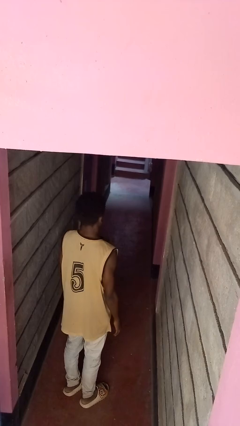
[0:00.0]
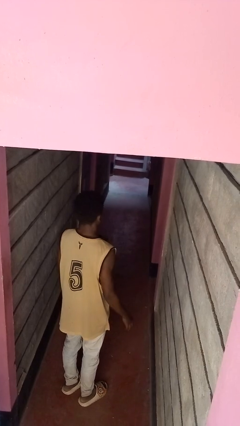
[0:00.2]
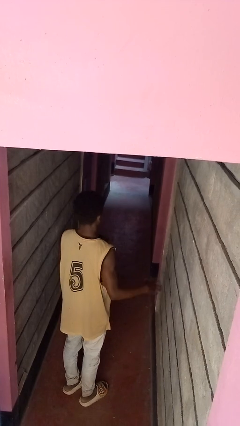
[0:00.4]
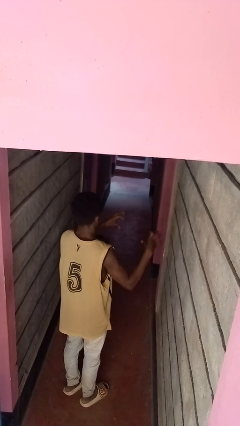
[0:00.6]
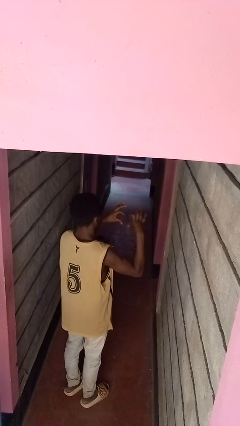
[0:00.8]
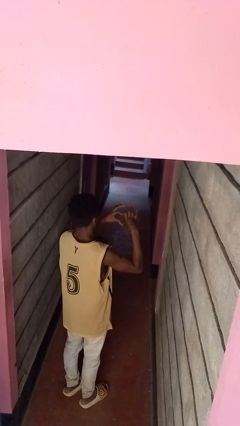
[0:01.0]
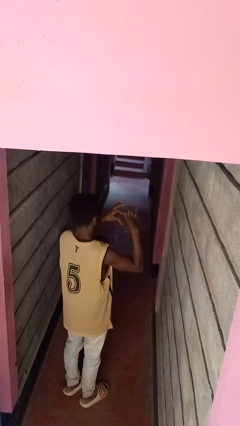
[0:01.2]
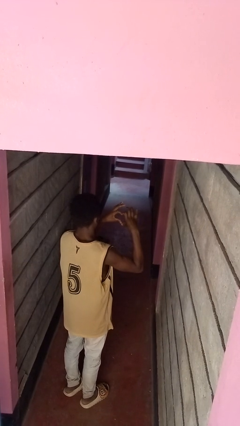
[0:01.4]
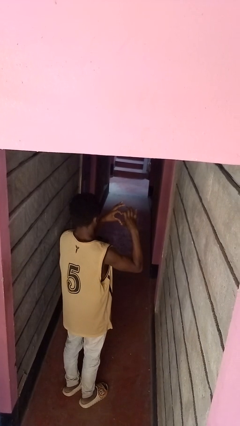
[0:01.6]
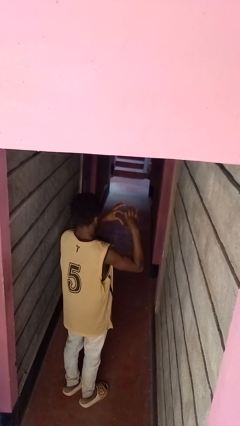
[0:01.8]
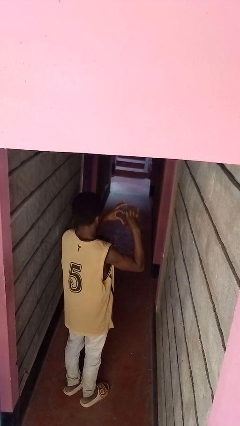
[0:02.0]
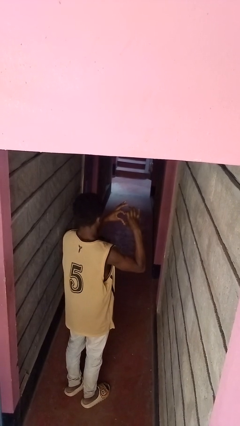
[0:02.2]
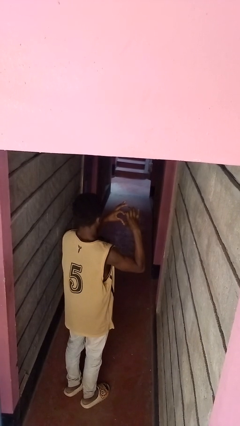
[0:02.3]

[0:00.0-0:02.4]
person gestures heart

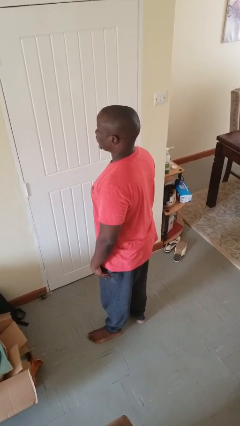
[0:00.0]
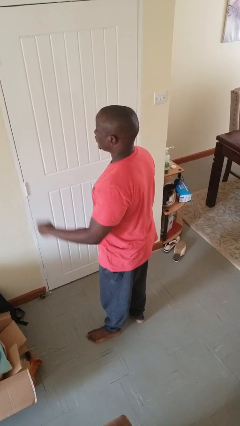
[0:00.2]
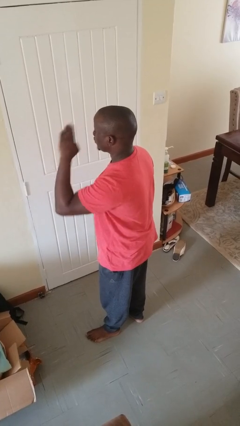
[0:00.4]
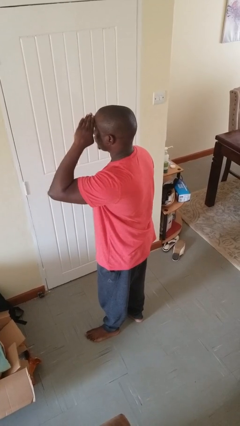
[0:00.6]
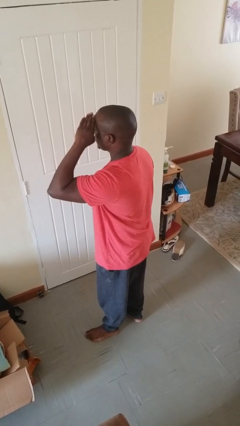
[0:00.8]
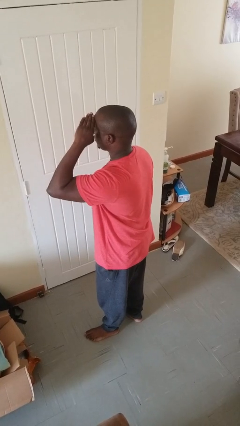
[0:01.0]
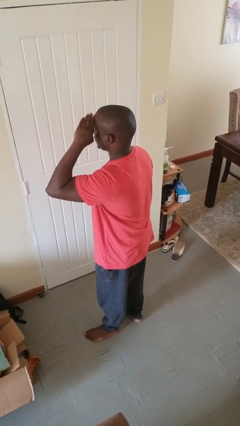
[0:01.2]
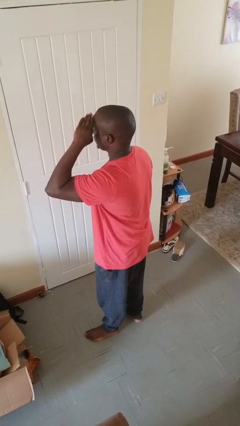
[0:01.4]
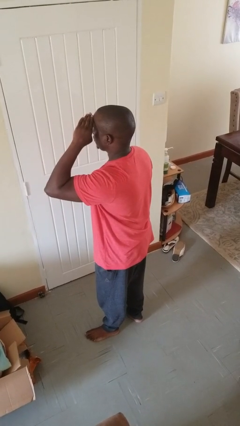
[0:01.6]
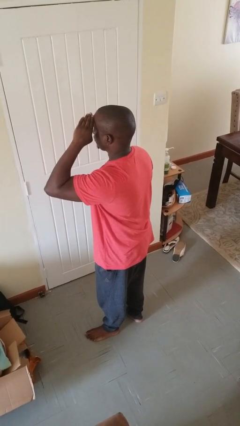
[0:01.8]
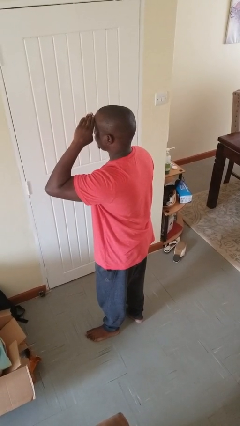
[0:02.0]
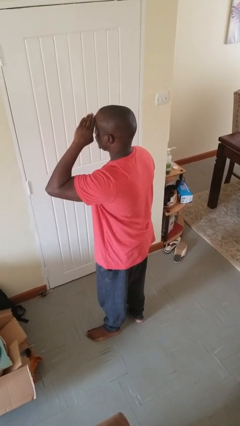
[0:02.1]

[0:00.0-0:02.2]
person salutes

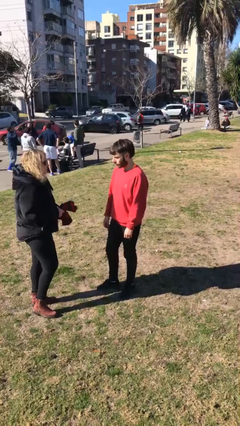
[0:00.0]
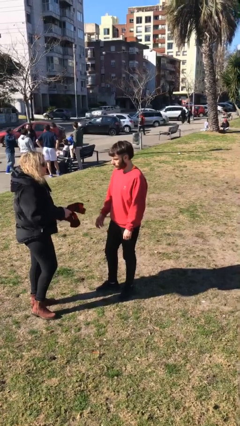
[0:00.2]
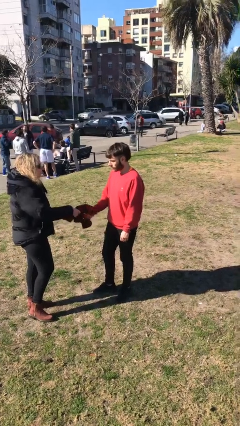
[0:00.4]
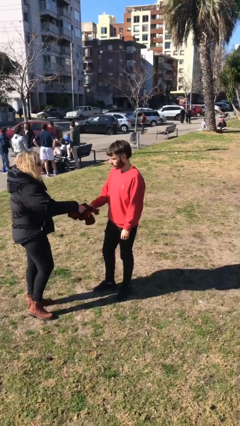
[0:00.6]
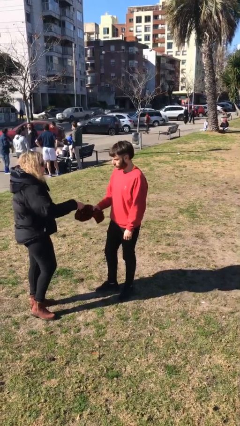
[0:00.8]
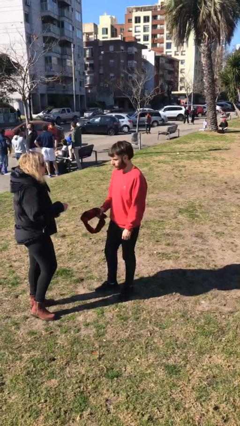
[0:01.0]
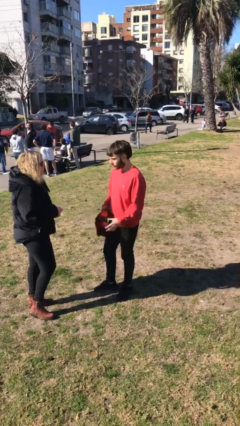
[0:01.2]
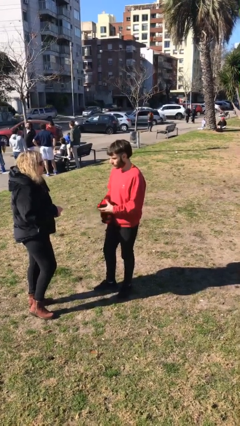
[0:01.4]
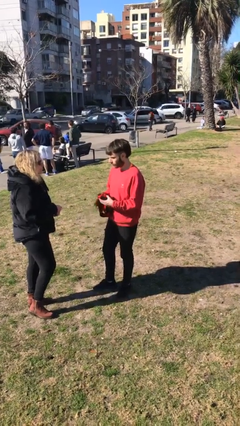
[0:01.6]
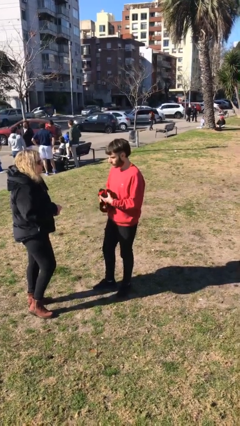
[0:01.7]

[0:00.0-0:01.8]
person transfers object to person

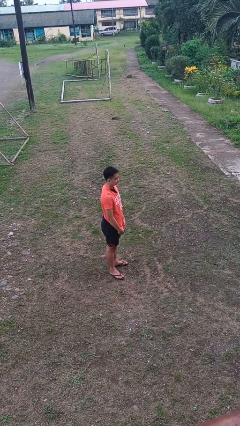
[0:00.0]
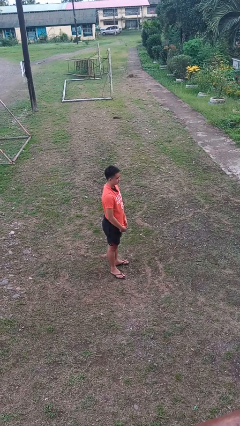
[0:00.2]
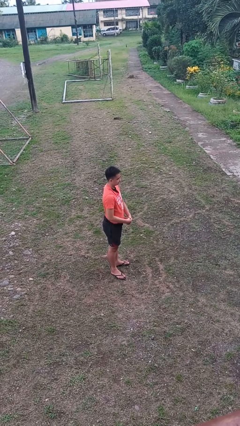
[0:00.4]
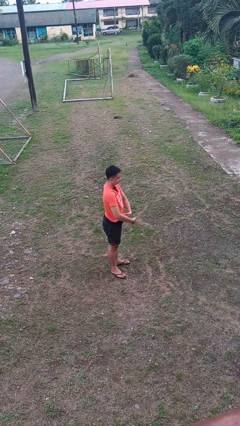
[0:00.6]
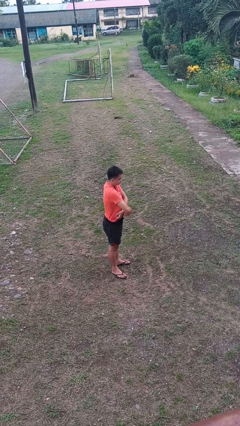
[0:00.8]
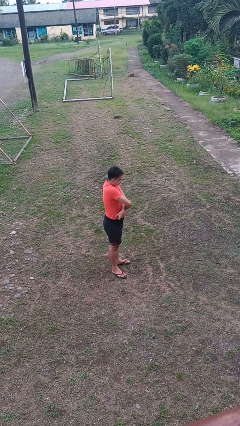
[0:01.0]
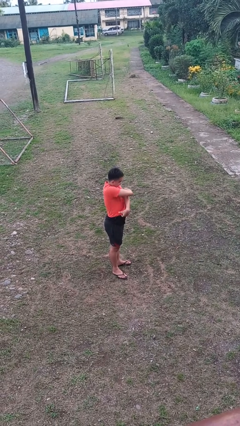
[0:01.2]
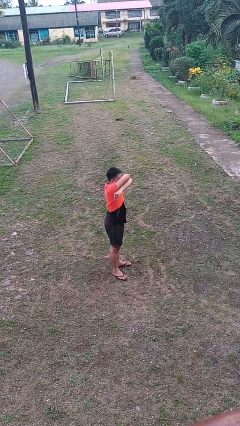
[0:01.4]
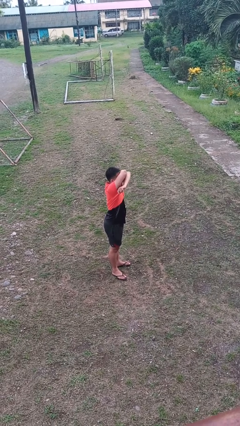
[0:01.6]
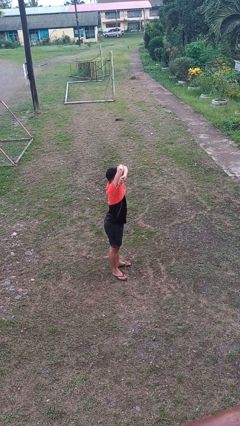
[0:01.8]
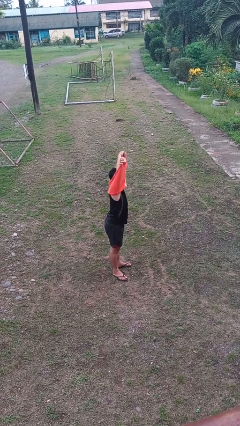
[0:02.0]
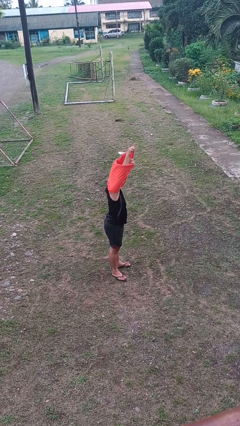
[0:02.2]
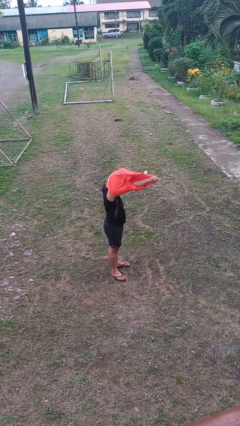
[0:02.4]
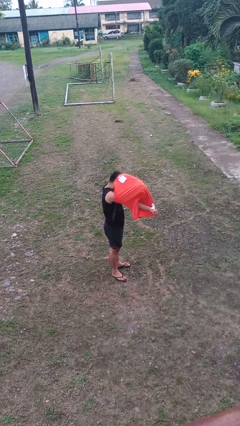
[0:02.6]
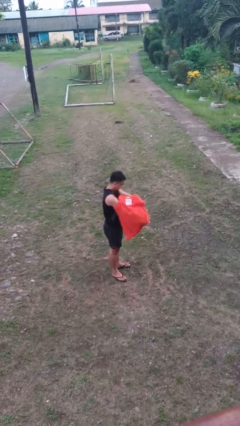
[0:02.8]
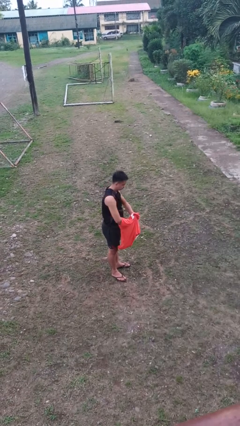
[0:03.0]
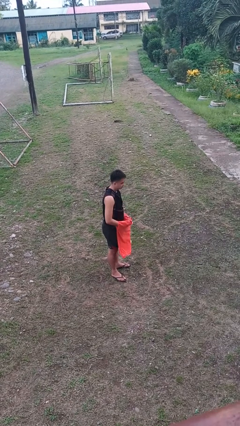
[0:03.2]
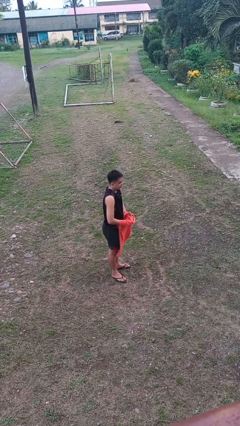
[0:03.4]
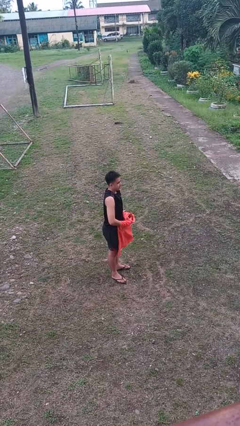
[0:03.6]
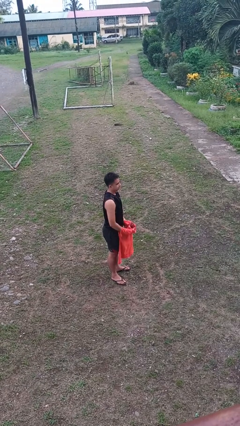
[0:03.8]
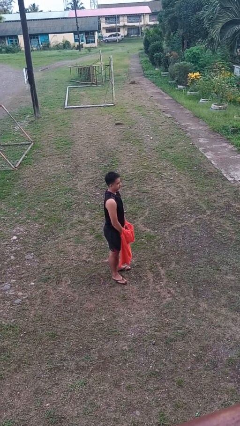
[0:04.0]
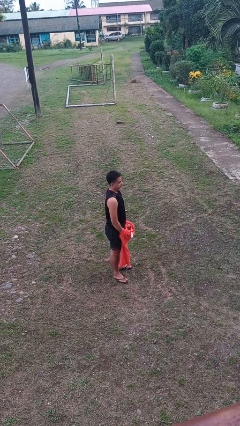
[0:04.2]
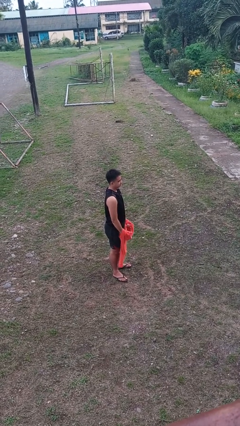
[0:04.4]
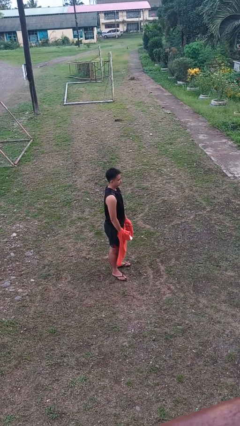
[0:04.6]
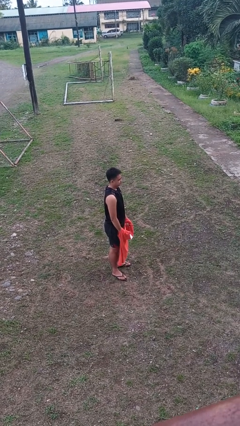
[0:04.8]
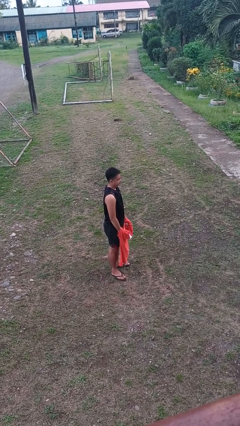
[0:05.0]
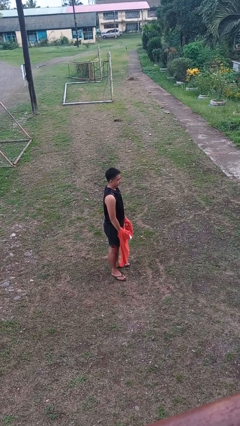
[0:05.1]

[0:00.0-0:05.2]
person takes off shirt

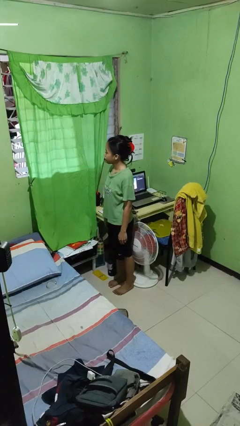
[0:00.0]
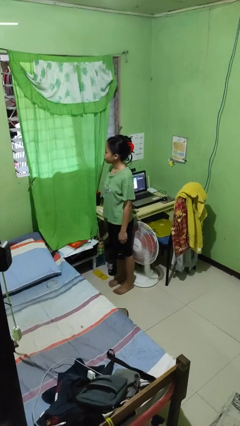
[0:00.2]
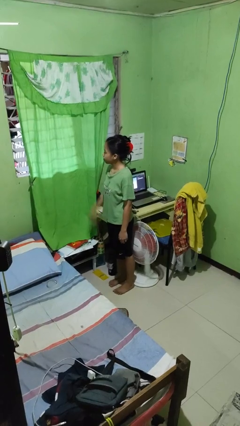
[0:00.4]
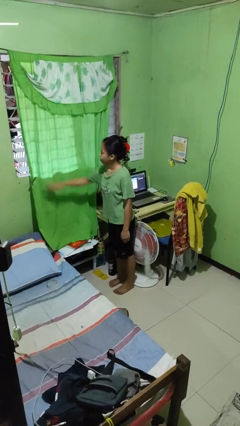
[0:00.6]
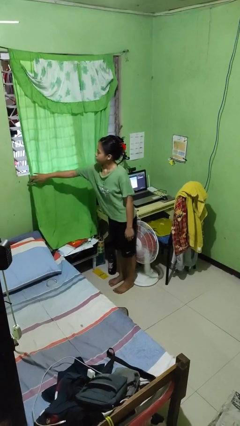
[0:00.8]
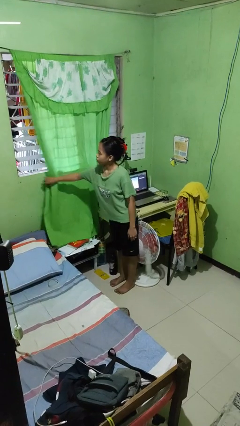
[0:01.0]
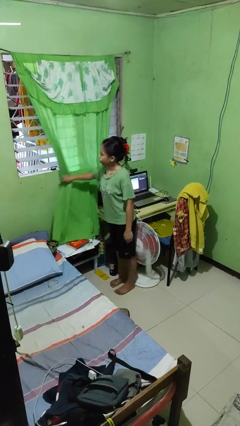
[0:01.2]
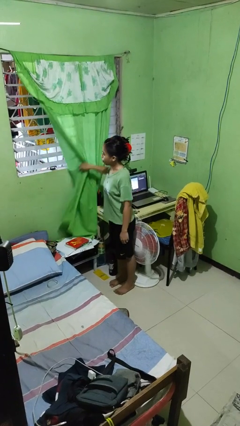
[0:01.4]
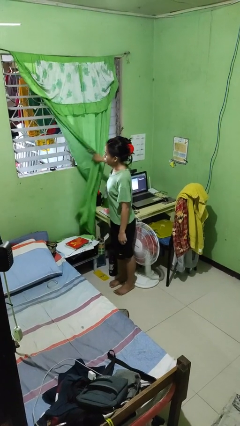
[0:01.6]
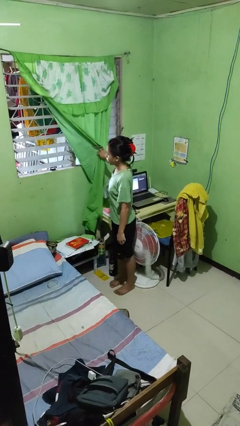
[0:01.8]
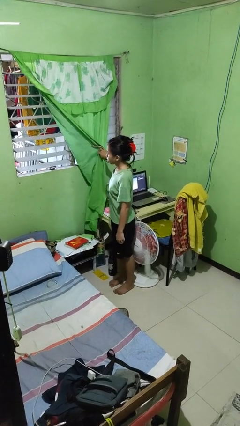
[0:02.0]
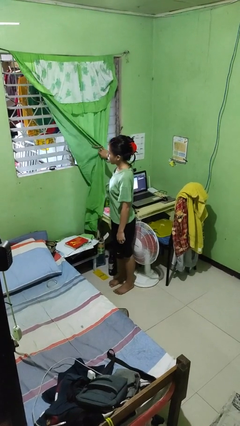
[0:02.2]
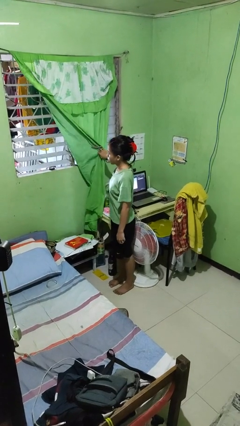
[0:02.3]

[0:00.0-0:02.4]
person opens curtains

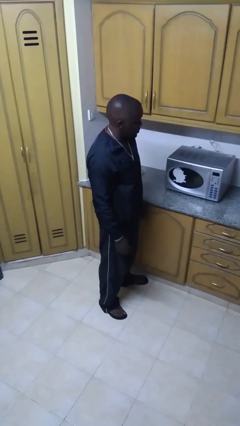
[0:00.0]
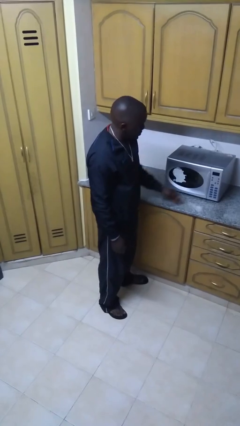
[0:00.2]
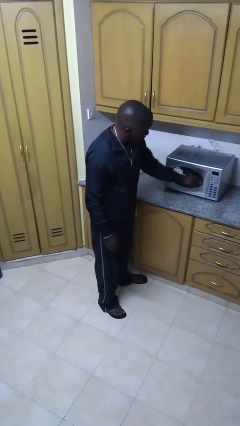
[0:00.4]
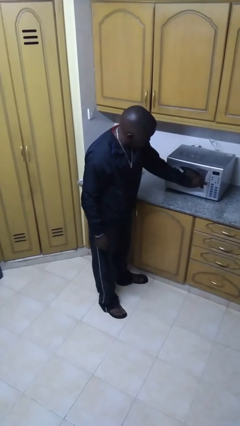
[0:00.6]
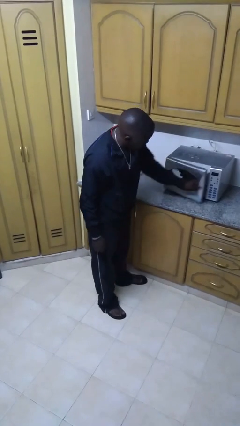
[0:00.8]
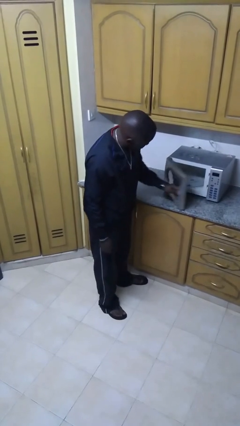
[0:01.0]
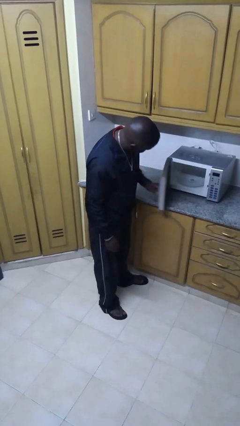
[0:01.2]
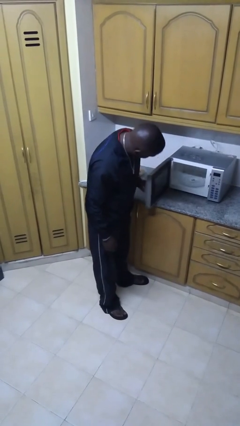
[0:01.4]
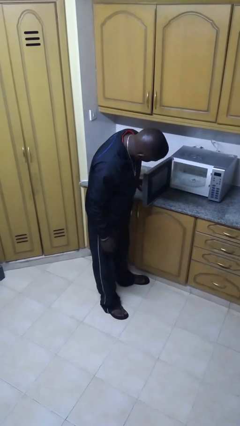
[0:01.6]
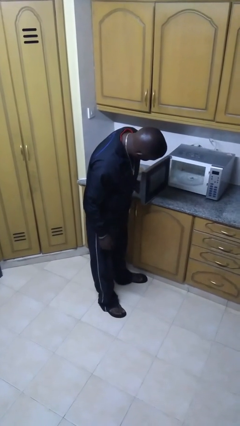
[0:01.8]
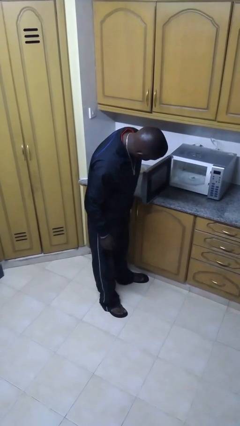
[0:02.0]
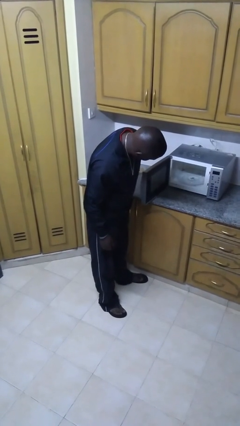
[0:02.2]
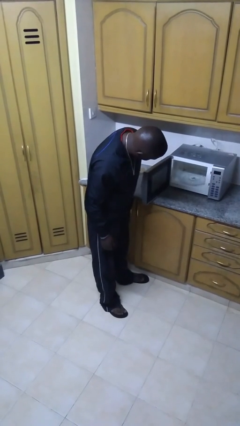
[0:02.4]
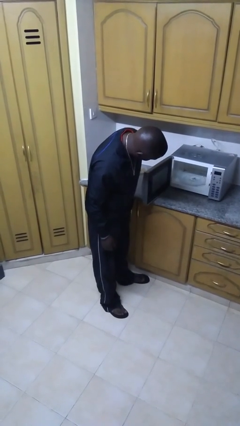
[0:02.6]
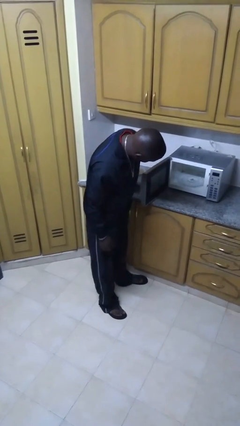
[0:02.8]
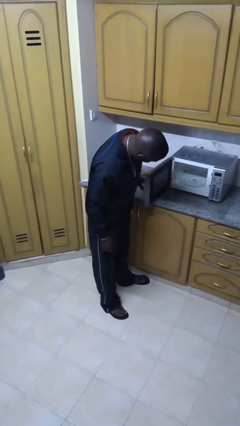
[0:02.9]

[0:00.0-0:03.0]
person opens microwave

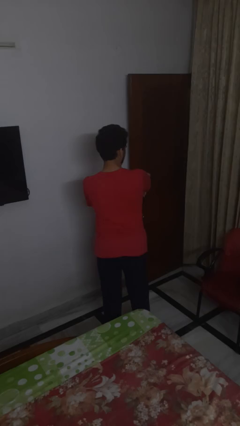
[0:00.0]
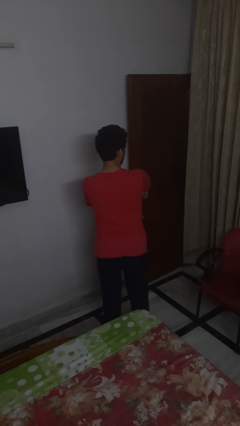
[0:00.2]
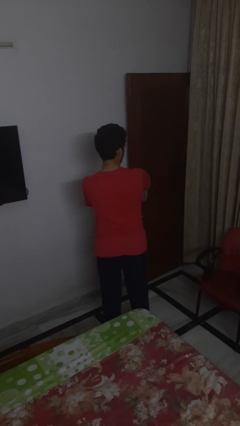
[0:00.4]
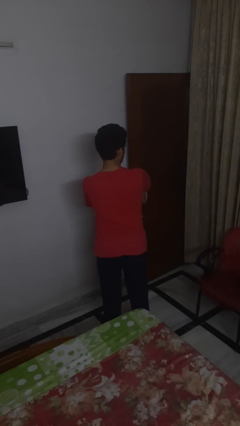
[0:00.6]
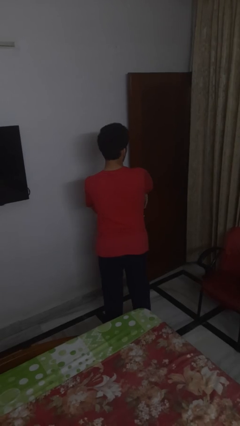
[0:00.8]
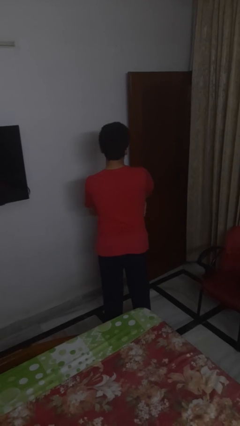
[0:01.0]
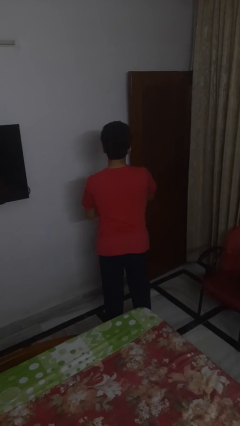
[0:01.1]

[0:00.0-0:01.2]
person swats bug
